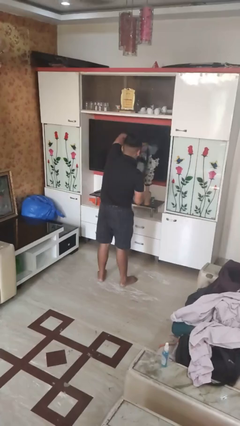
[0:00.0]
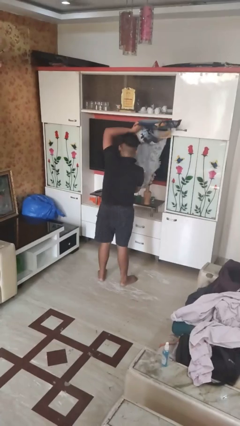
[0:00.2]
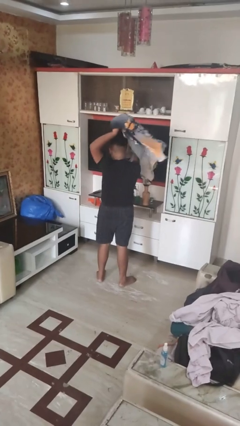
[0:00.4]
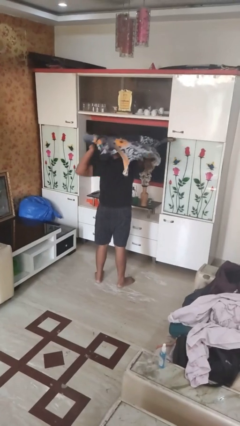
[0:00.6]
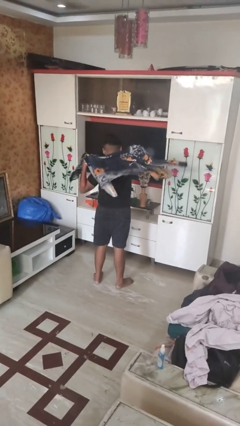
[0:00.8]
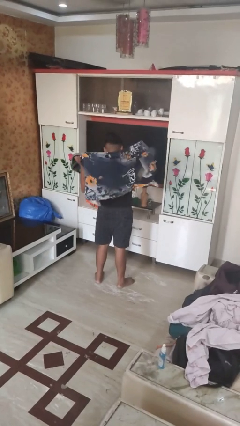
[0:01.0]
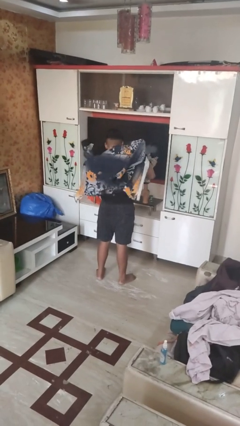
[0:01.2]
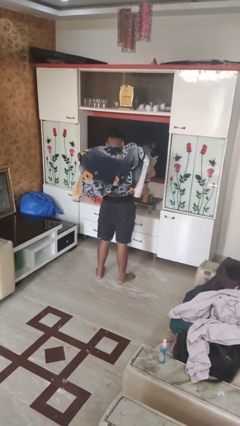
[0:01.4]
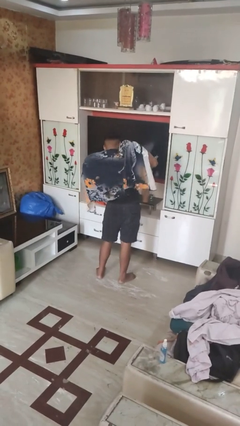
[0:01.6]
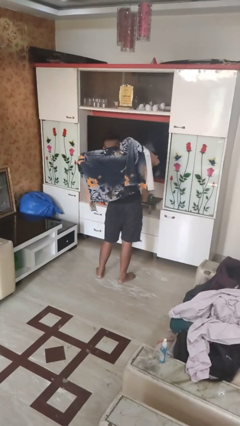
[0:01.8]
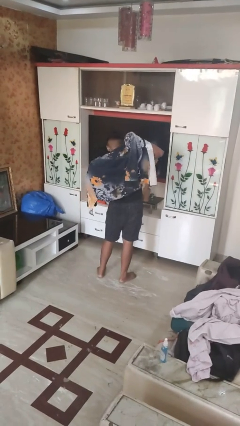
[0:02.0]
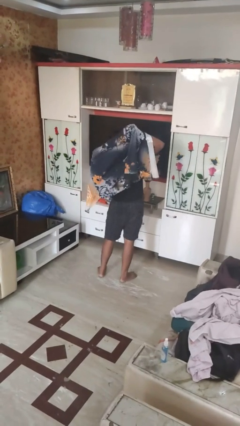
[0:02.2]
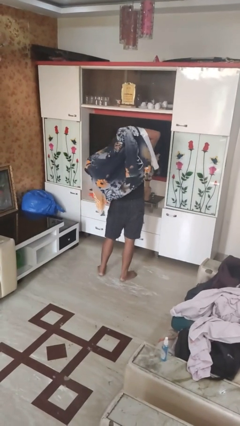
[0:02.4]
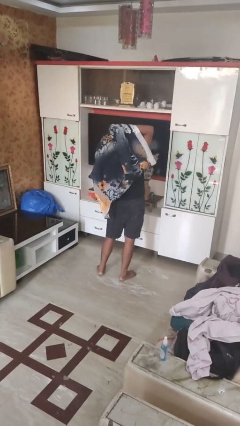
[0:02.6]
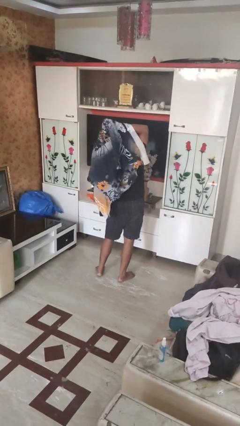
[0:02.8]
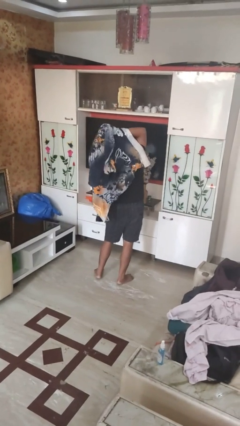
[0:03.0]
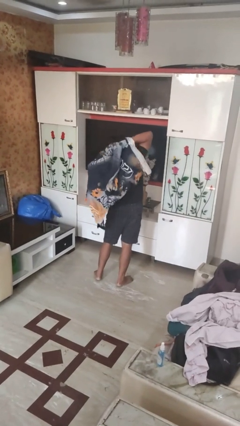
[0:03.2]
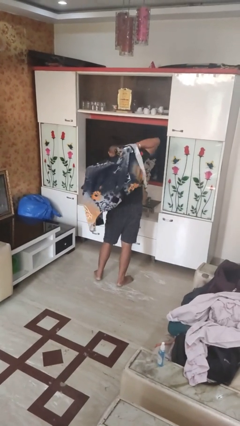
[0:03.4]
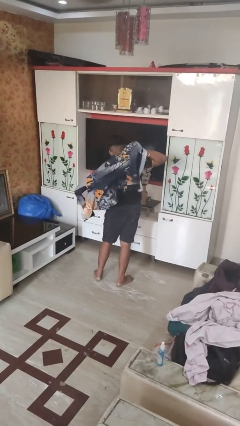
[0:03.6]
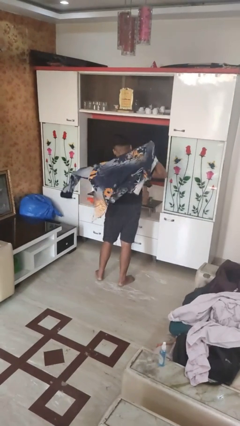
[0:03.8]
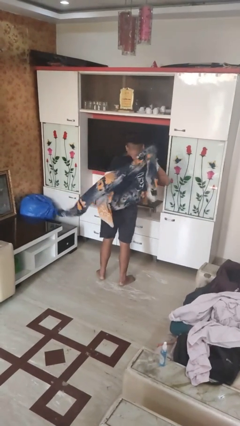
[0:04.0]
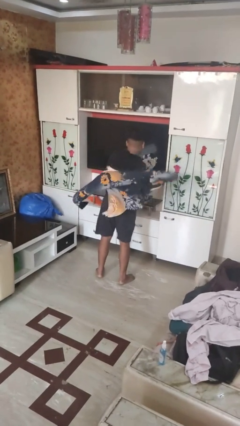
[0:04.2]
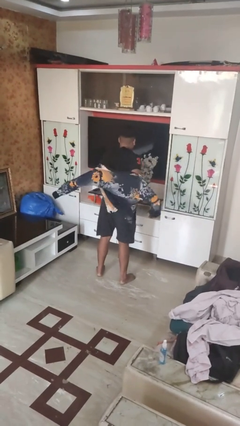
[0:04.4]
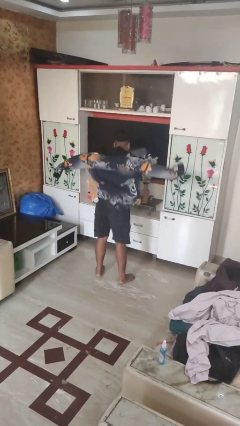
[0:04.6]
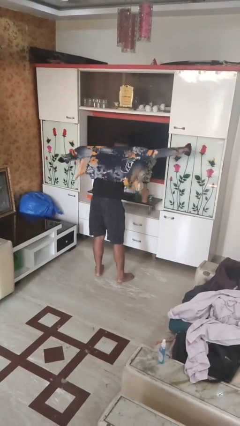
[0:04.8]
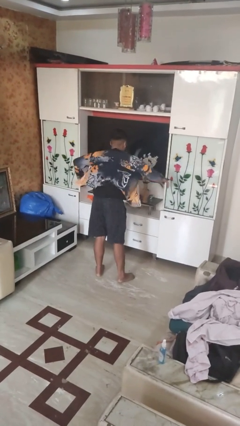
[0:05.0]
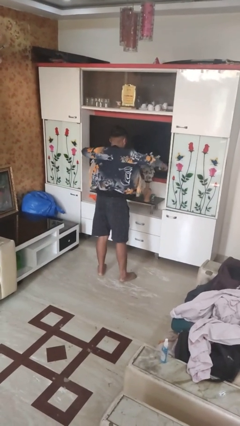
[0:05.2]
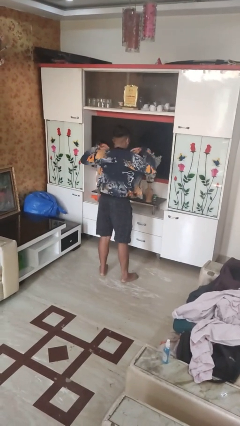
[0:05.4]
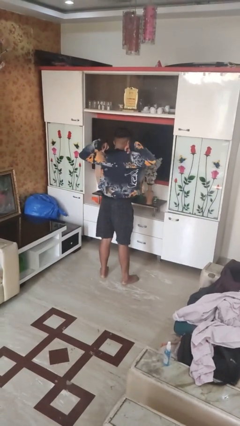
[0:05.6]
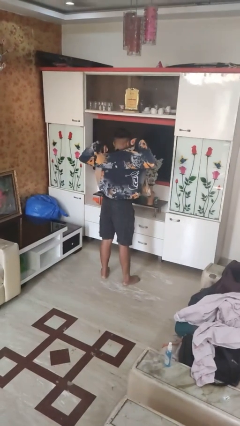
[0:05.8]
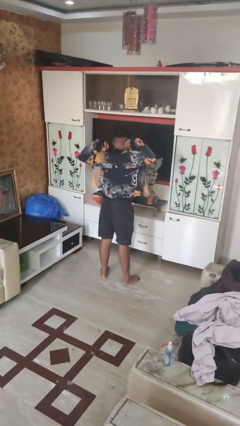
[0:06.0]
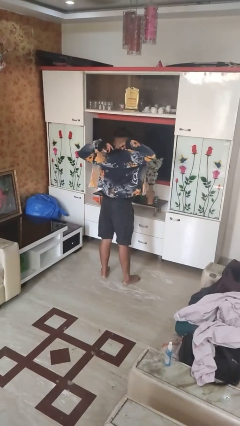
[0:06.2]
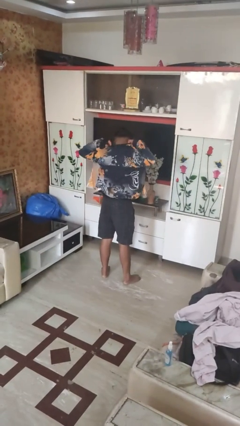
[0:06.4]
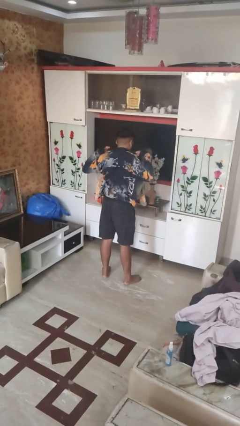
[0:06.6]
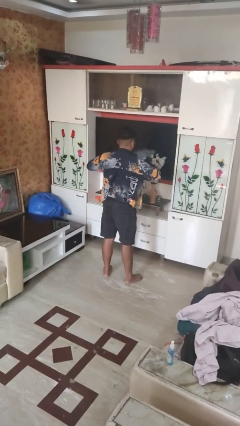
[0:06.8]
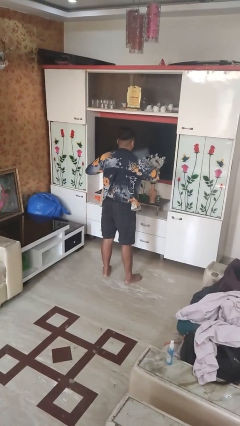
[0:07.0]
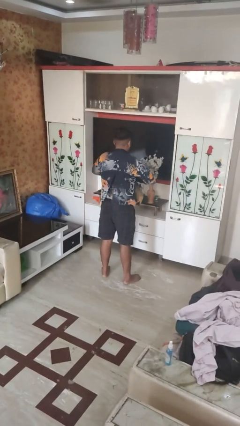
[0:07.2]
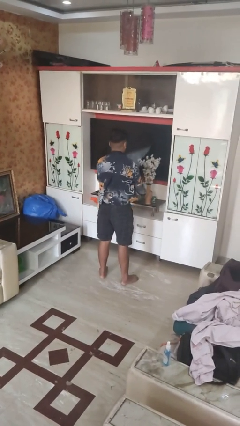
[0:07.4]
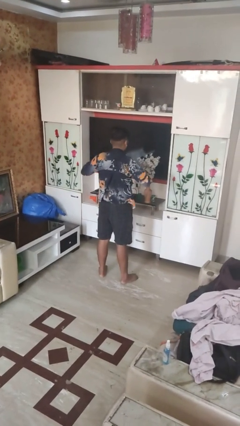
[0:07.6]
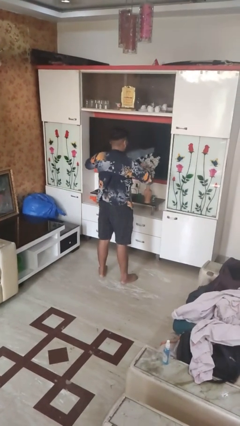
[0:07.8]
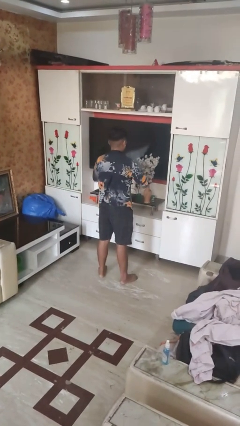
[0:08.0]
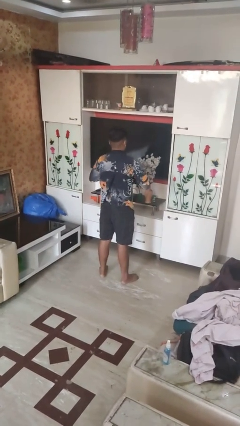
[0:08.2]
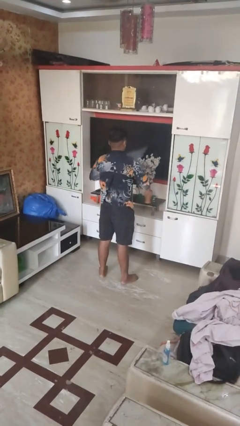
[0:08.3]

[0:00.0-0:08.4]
person puts on shirt

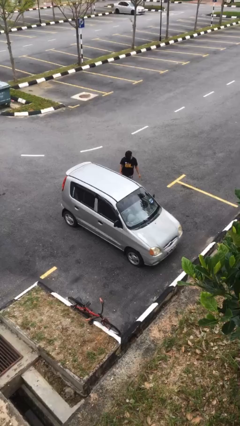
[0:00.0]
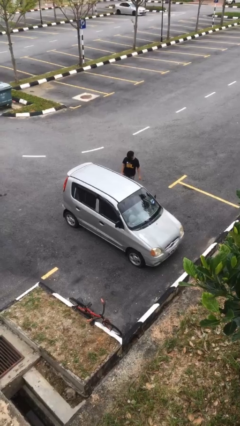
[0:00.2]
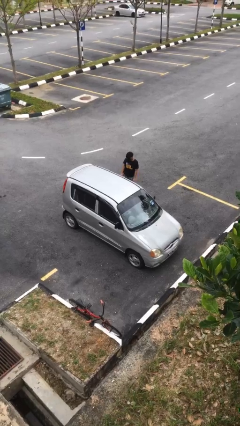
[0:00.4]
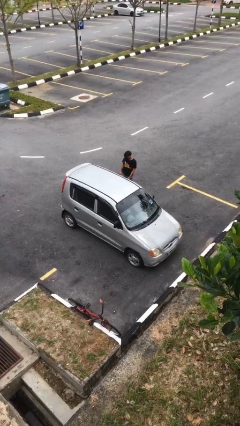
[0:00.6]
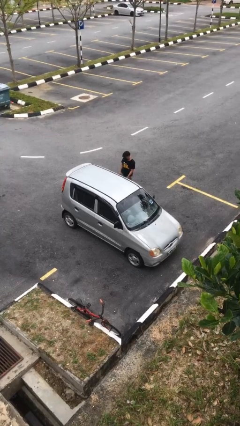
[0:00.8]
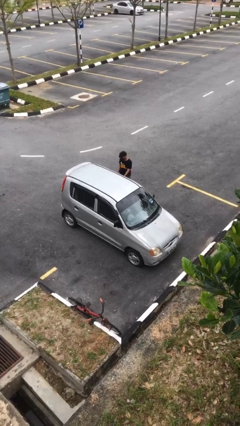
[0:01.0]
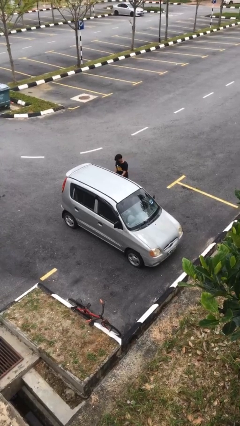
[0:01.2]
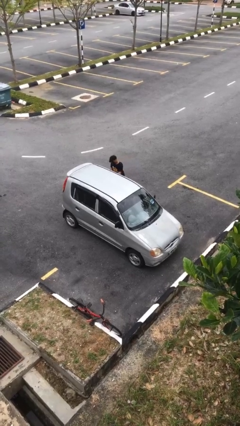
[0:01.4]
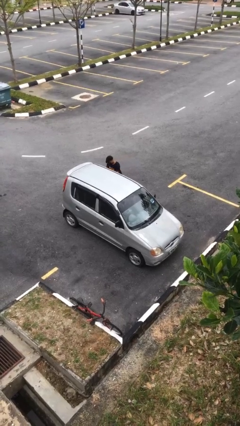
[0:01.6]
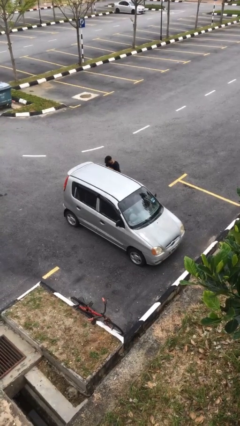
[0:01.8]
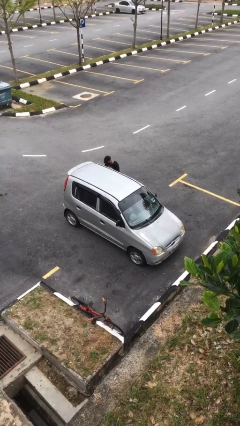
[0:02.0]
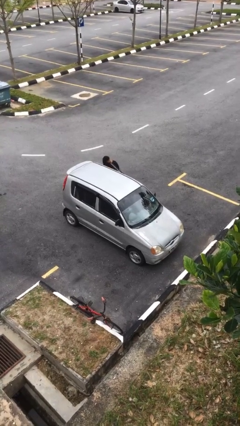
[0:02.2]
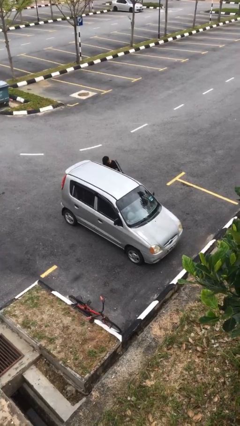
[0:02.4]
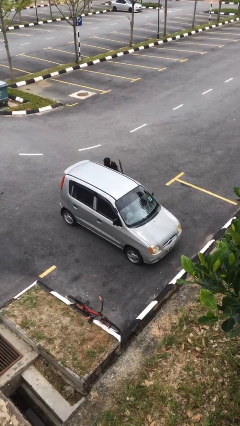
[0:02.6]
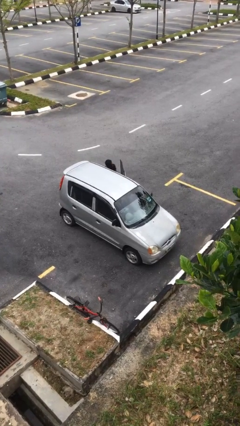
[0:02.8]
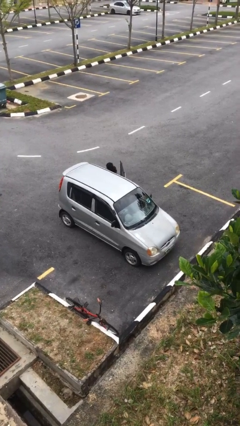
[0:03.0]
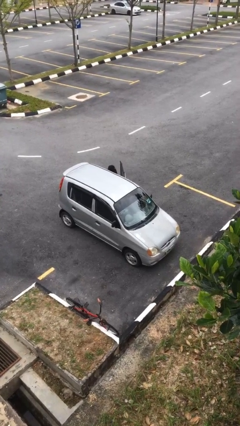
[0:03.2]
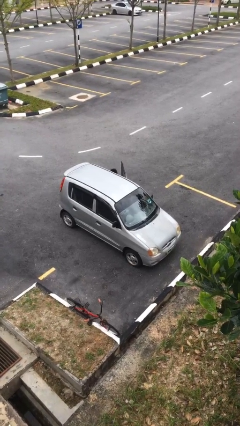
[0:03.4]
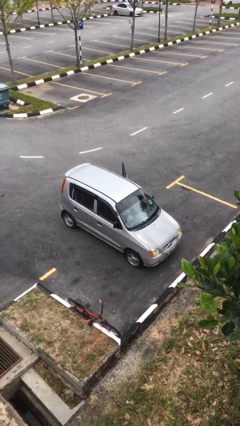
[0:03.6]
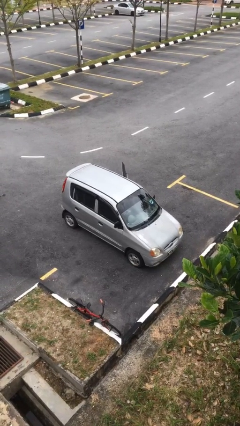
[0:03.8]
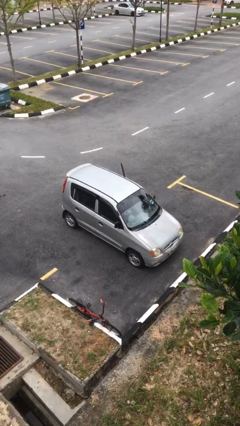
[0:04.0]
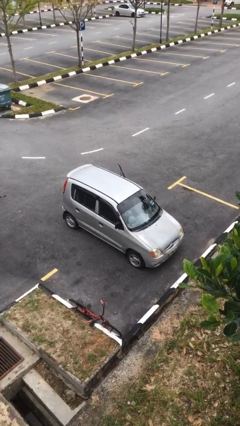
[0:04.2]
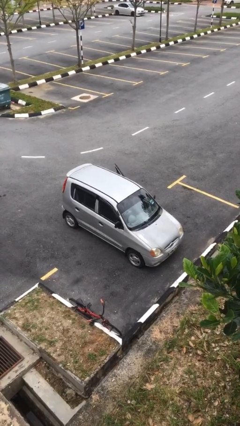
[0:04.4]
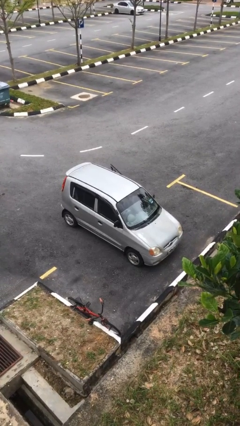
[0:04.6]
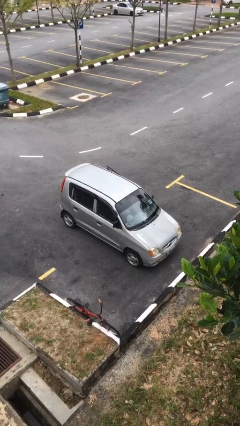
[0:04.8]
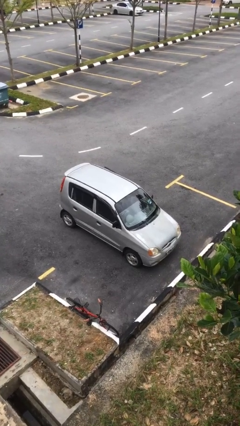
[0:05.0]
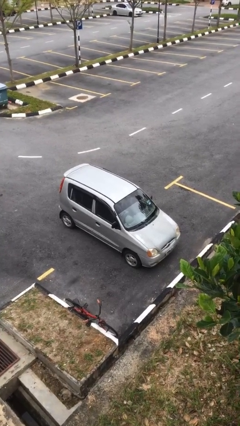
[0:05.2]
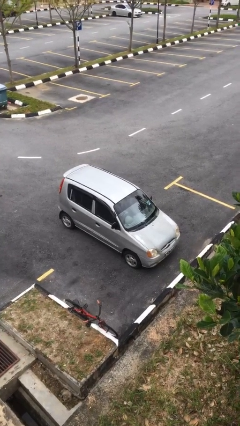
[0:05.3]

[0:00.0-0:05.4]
car picks up person

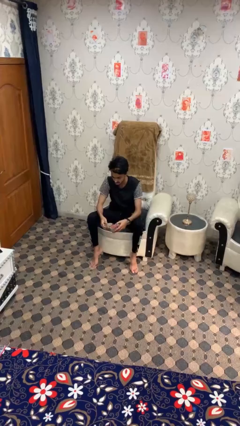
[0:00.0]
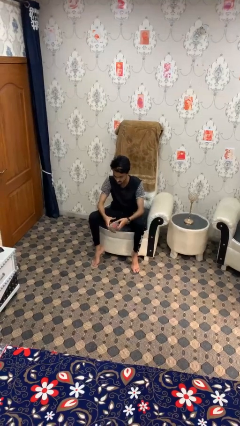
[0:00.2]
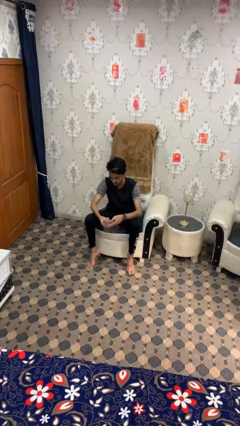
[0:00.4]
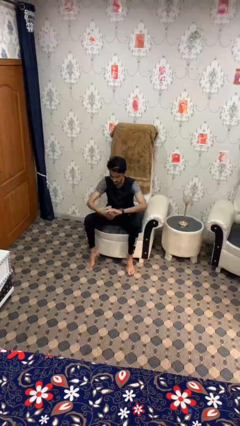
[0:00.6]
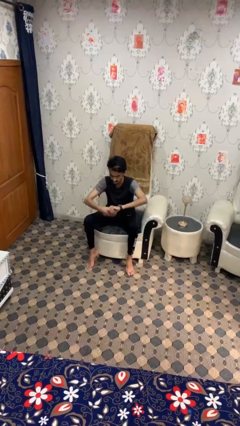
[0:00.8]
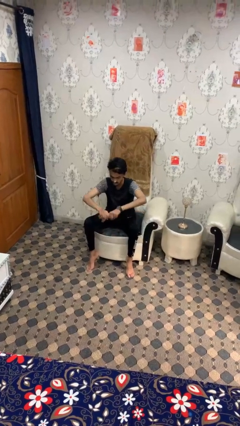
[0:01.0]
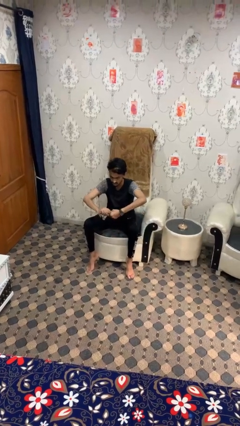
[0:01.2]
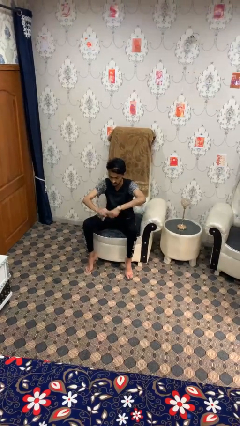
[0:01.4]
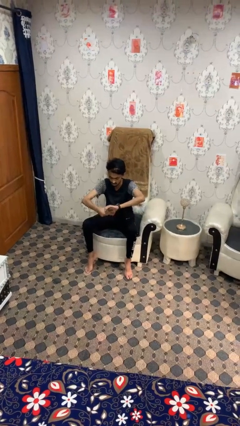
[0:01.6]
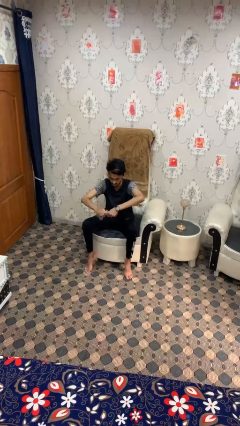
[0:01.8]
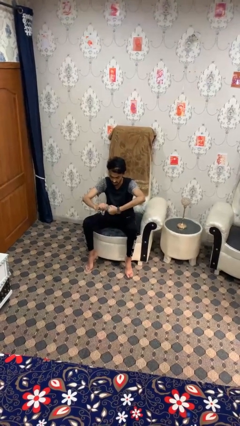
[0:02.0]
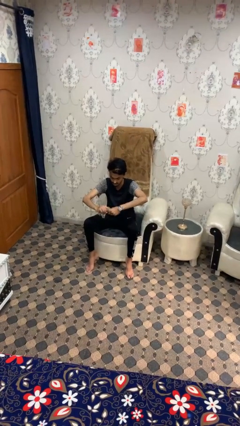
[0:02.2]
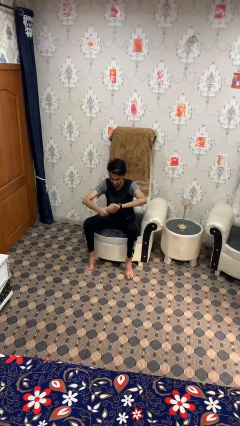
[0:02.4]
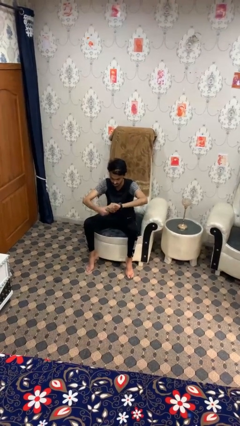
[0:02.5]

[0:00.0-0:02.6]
person squeezes object

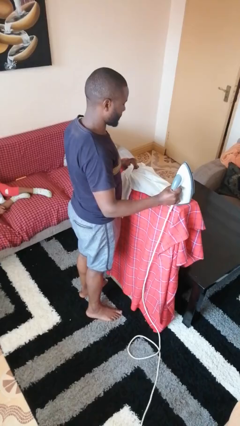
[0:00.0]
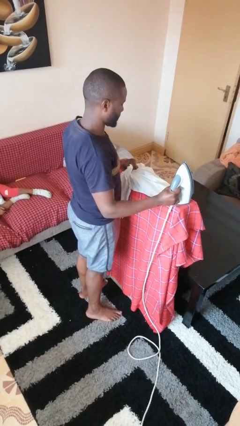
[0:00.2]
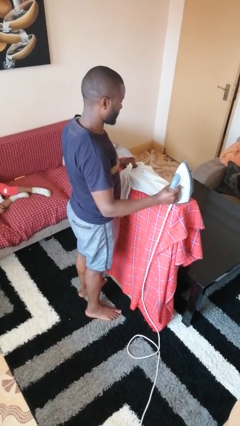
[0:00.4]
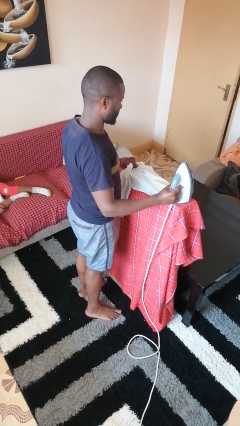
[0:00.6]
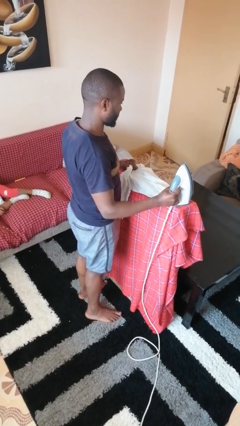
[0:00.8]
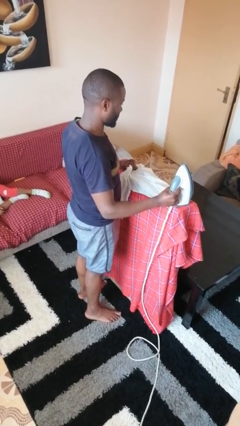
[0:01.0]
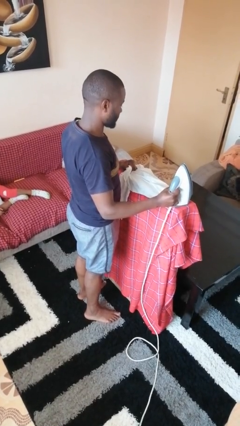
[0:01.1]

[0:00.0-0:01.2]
person irons clothes
